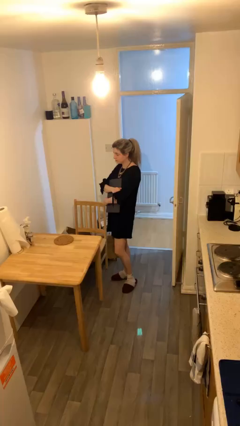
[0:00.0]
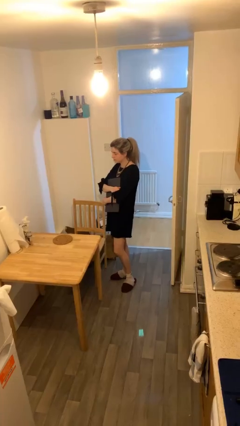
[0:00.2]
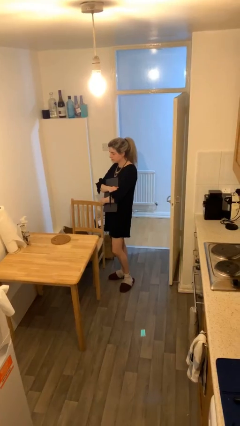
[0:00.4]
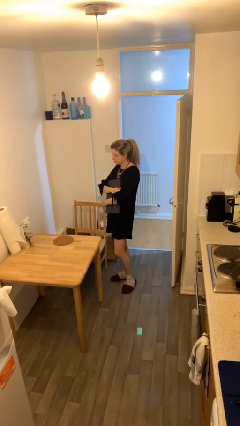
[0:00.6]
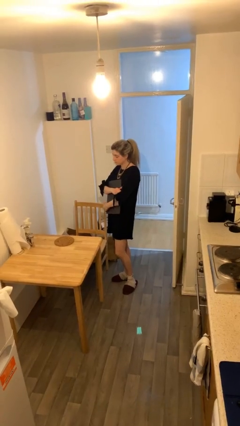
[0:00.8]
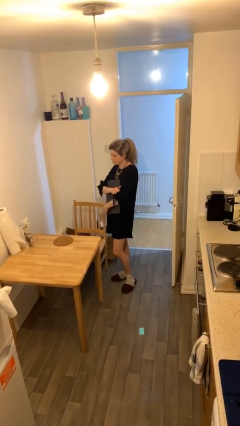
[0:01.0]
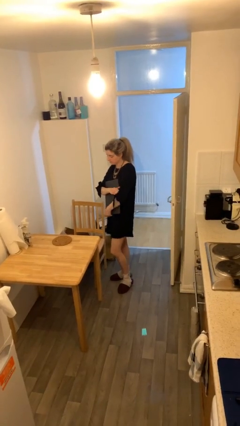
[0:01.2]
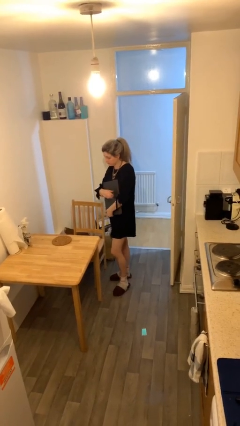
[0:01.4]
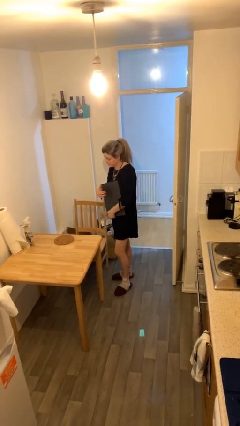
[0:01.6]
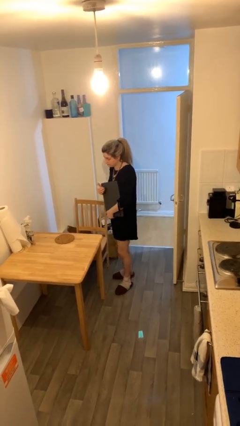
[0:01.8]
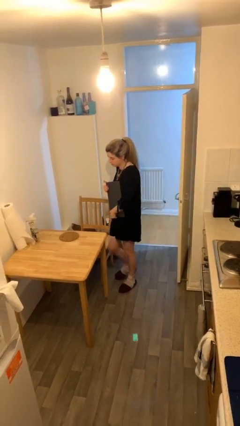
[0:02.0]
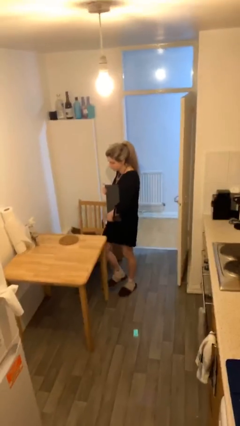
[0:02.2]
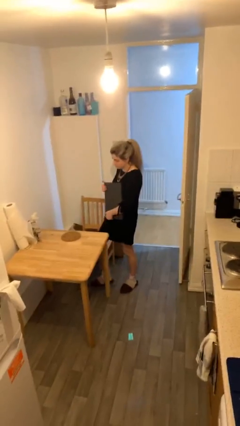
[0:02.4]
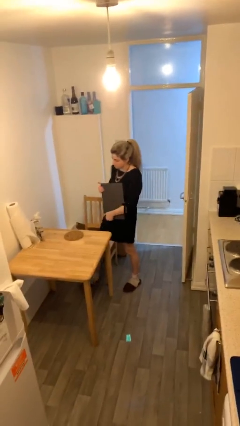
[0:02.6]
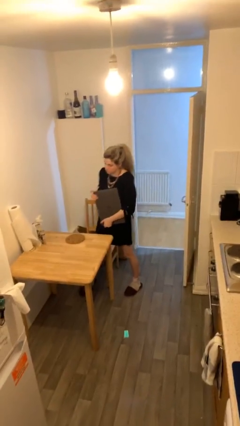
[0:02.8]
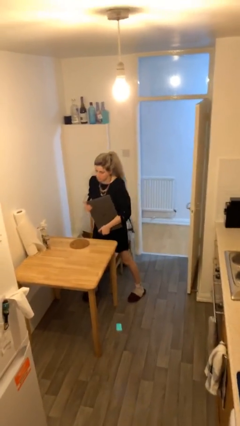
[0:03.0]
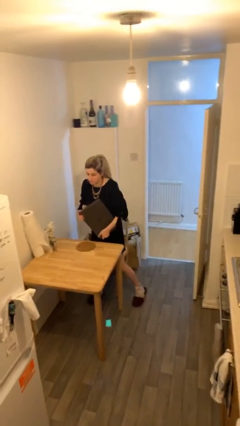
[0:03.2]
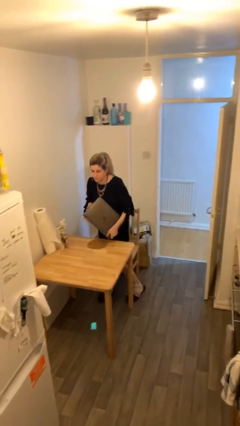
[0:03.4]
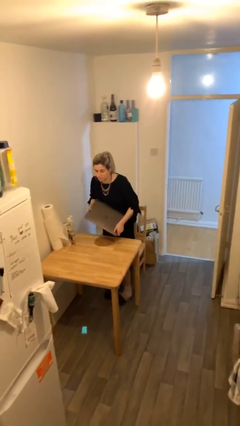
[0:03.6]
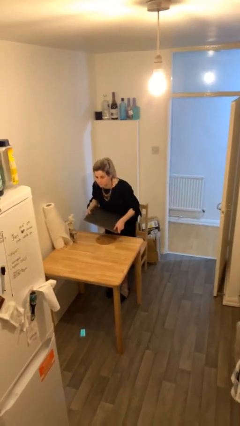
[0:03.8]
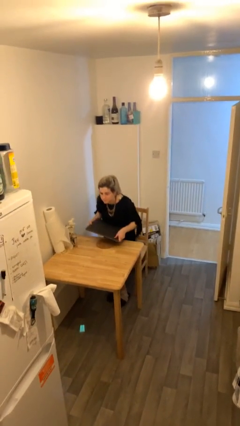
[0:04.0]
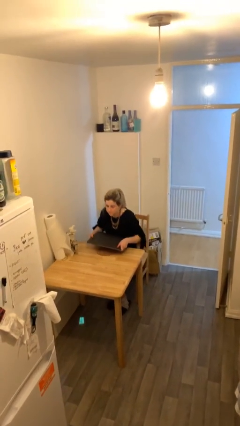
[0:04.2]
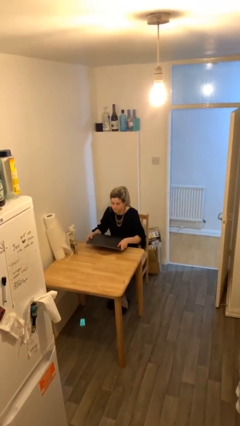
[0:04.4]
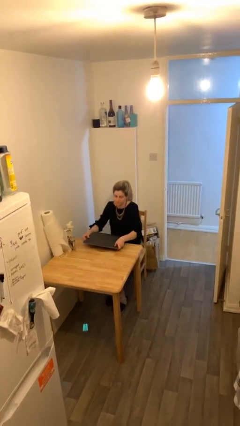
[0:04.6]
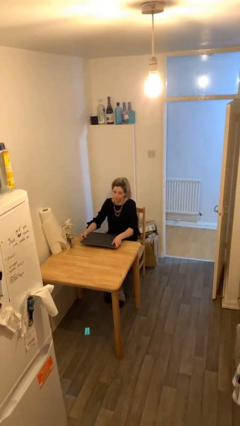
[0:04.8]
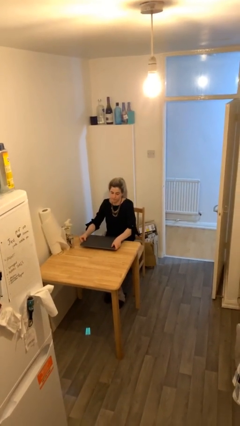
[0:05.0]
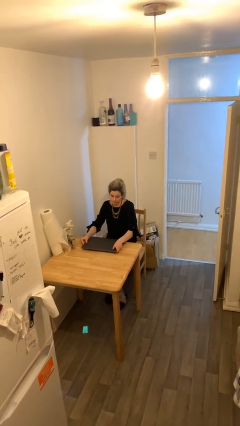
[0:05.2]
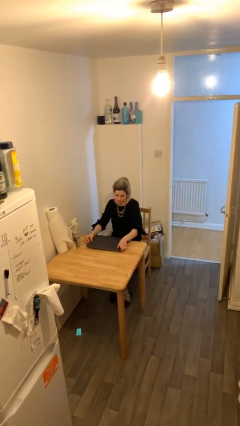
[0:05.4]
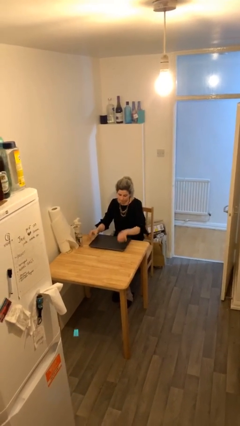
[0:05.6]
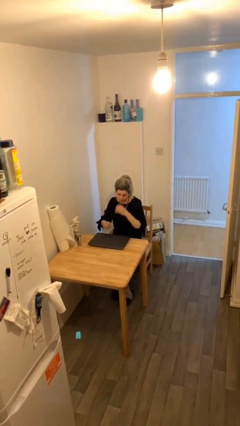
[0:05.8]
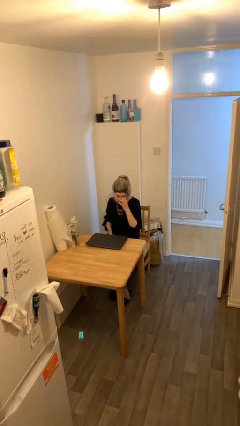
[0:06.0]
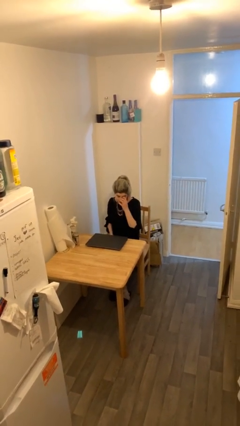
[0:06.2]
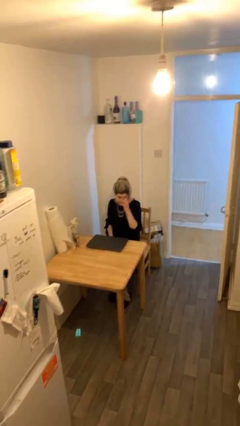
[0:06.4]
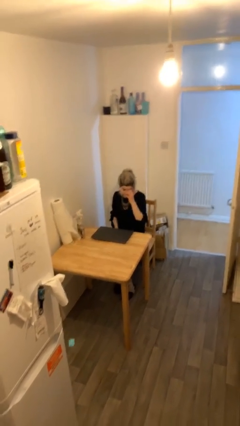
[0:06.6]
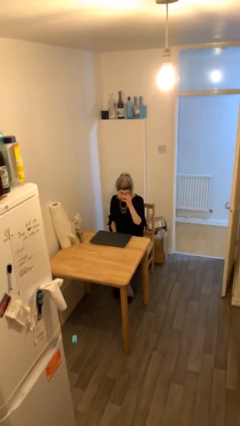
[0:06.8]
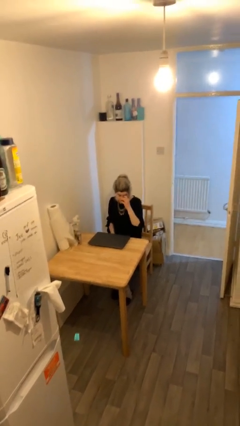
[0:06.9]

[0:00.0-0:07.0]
person sits down

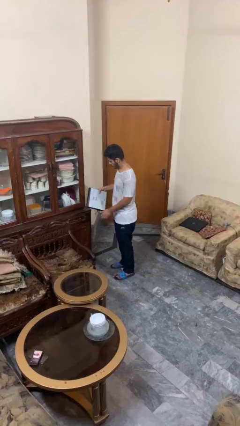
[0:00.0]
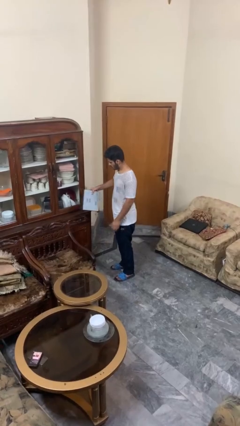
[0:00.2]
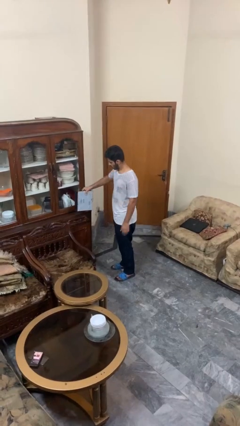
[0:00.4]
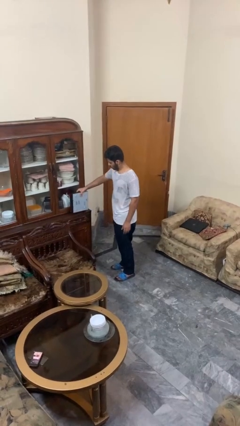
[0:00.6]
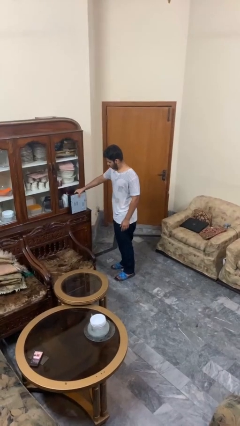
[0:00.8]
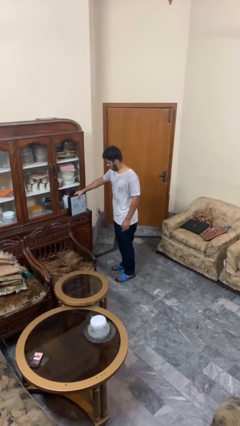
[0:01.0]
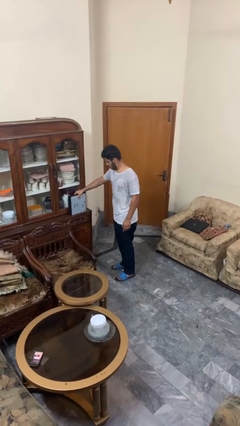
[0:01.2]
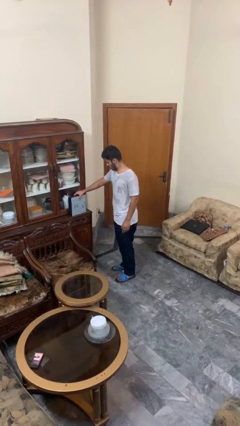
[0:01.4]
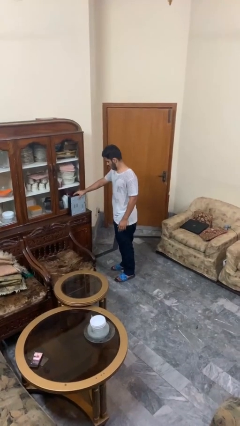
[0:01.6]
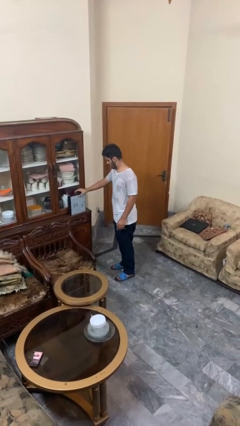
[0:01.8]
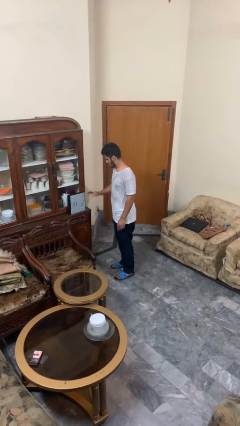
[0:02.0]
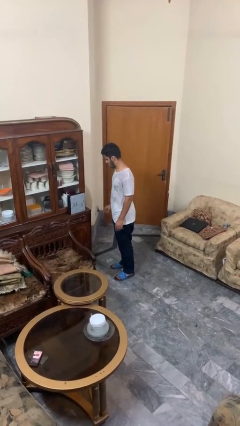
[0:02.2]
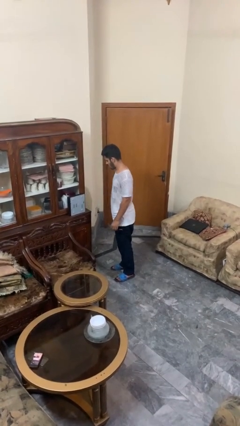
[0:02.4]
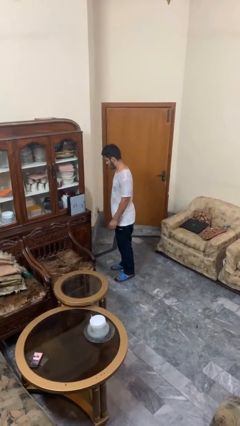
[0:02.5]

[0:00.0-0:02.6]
person puts down object on countertop

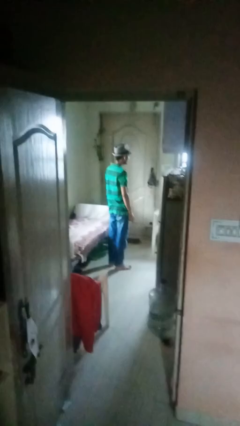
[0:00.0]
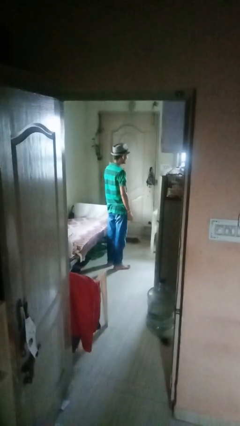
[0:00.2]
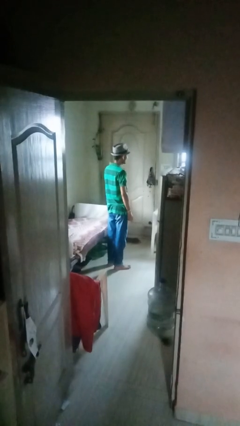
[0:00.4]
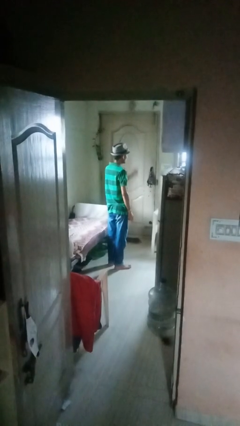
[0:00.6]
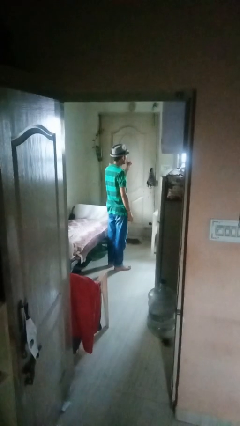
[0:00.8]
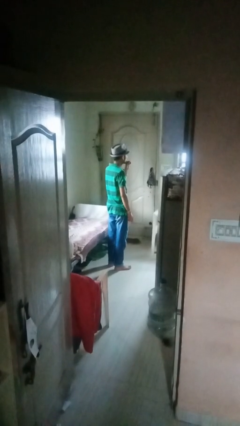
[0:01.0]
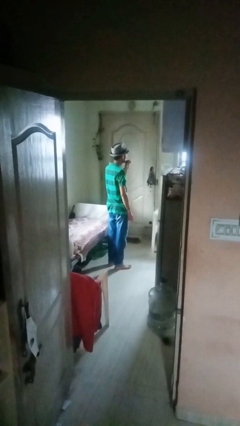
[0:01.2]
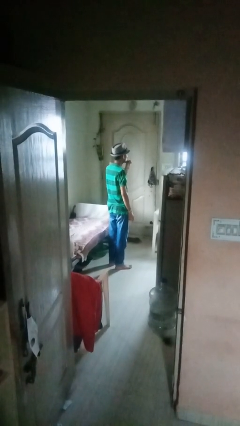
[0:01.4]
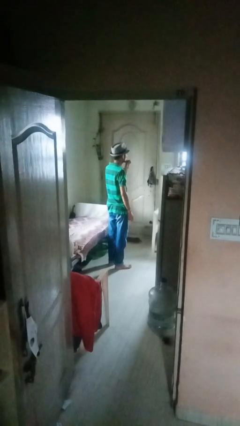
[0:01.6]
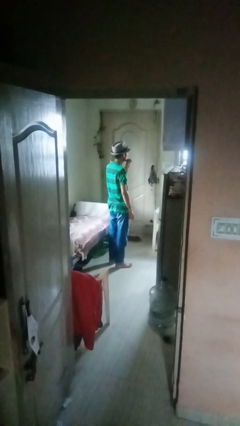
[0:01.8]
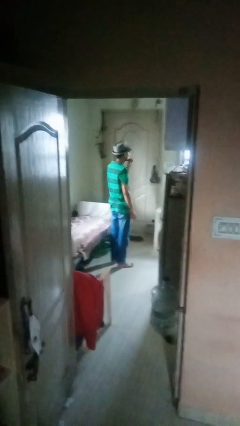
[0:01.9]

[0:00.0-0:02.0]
person gestures be quiet

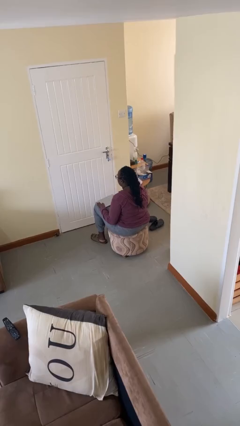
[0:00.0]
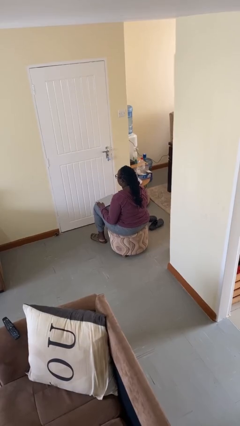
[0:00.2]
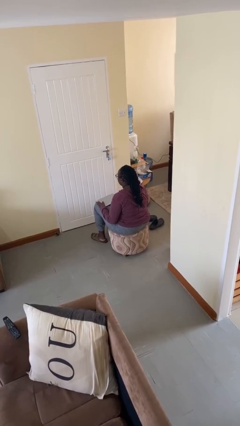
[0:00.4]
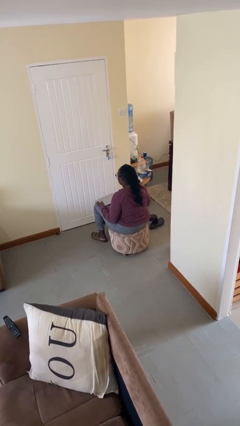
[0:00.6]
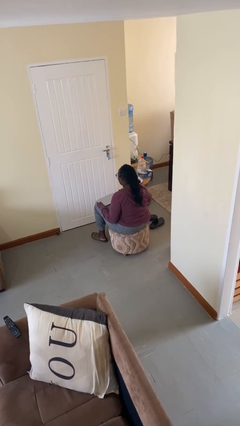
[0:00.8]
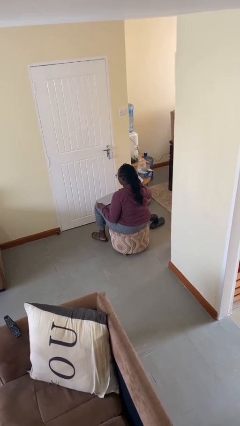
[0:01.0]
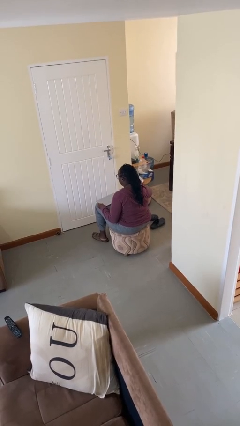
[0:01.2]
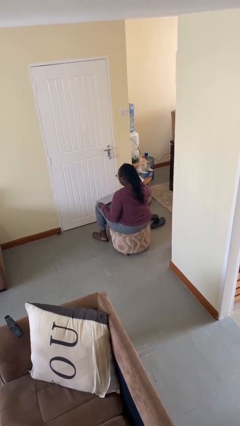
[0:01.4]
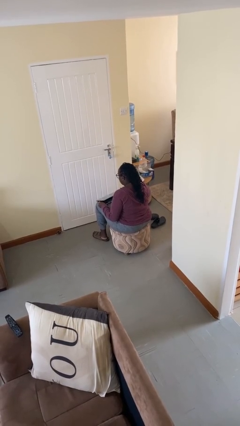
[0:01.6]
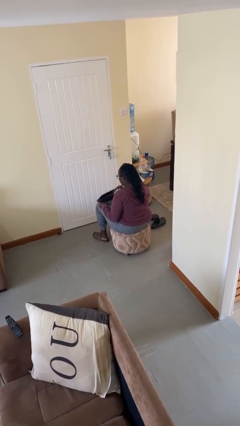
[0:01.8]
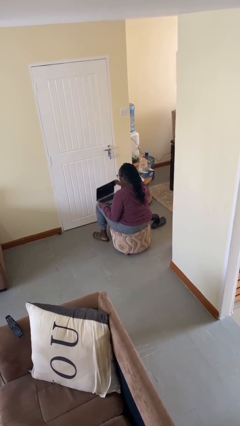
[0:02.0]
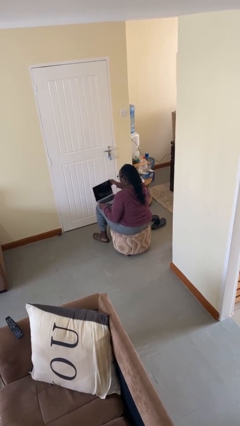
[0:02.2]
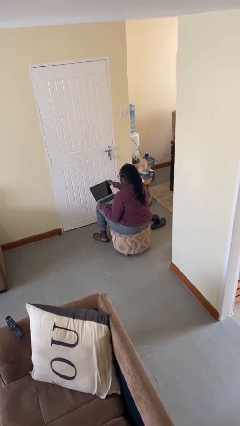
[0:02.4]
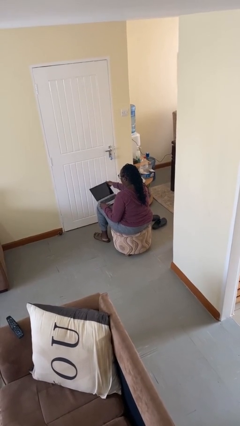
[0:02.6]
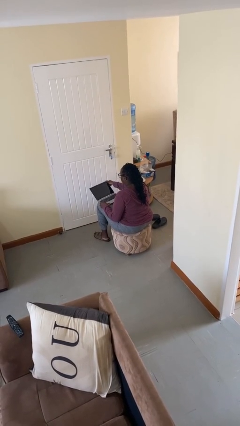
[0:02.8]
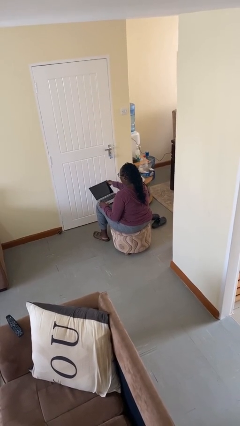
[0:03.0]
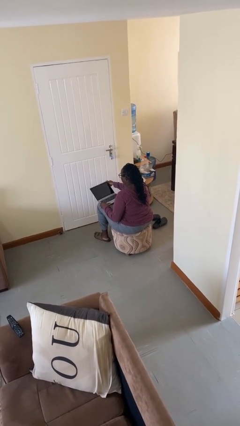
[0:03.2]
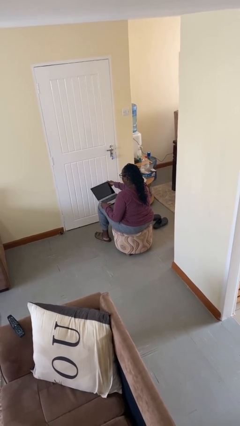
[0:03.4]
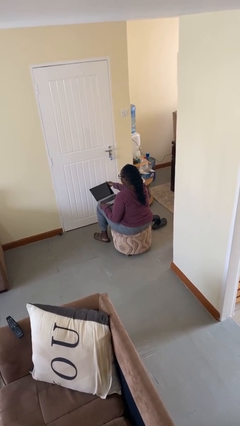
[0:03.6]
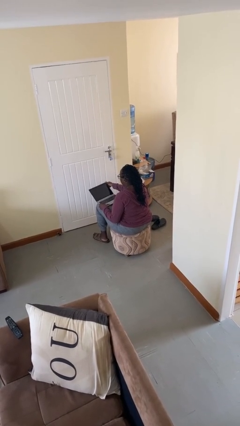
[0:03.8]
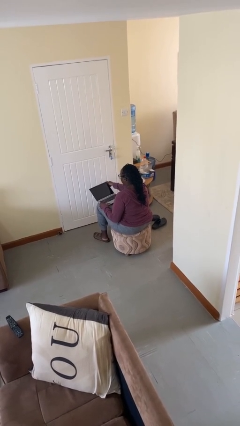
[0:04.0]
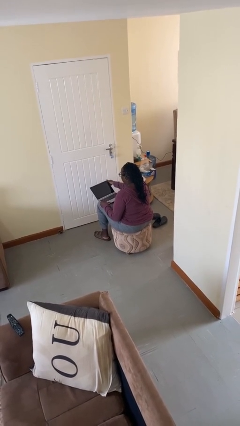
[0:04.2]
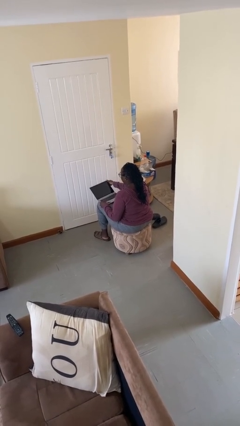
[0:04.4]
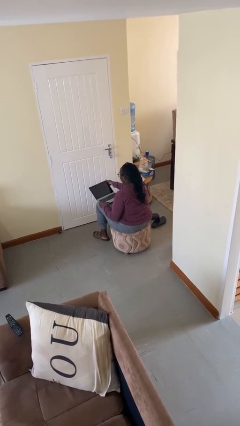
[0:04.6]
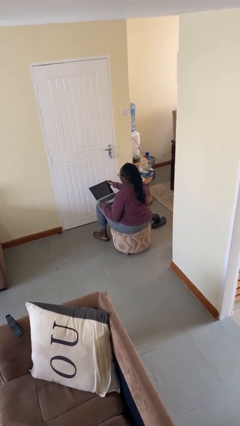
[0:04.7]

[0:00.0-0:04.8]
person opens laptop

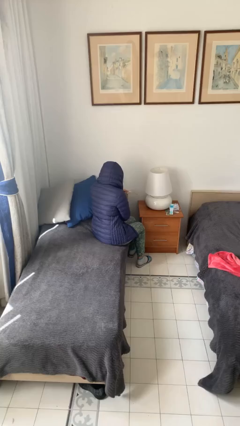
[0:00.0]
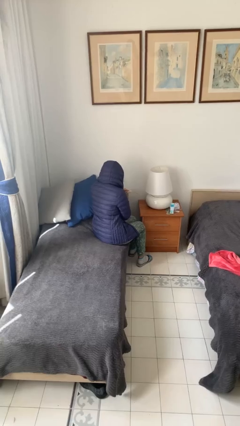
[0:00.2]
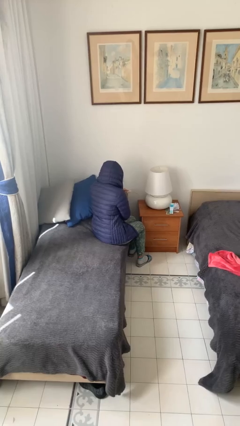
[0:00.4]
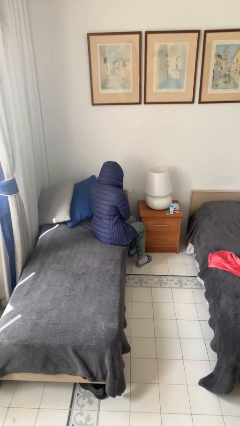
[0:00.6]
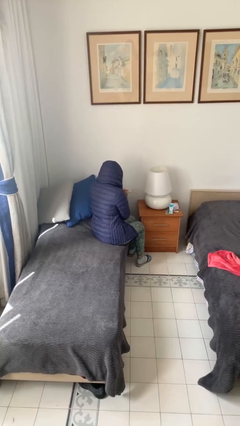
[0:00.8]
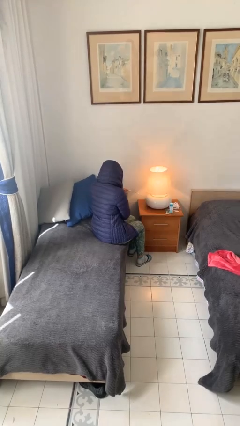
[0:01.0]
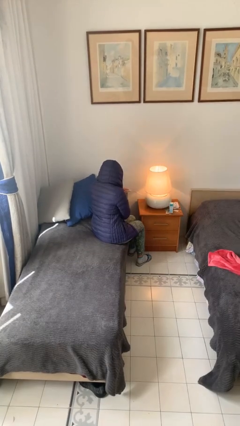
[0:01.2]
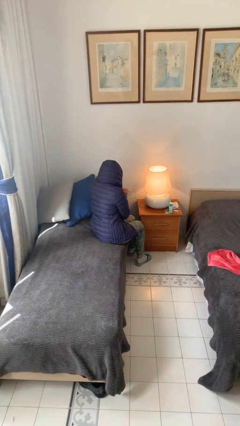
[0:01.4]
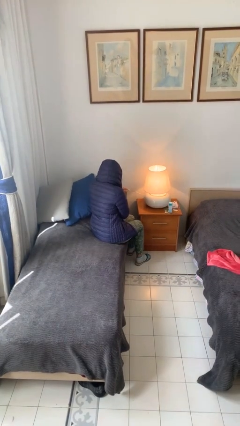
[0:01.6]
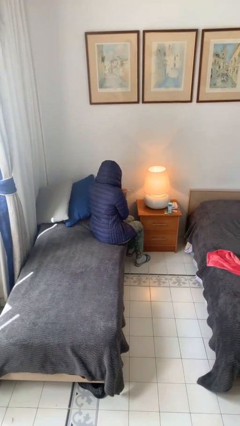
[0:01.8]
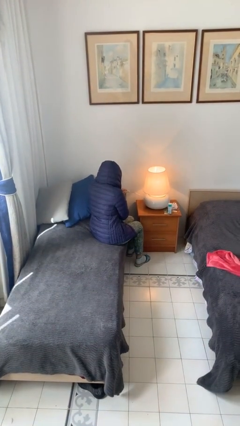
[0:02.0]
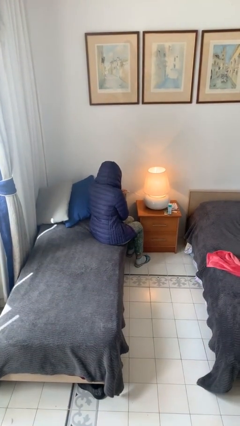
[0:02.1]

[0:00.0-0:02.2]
person turns on lamp
